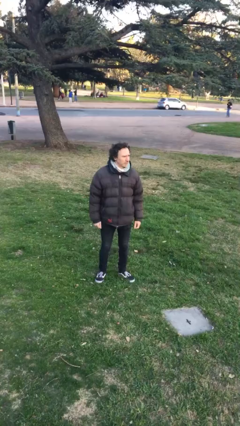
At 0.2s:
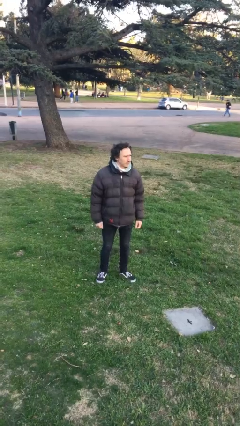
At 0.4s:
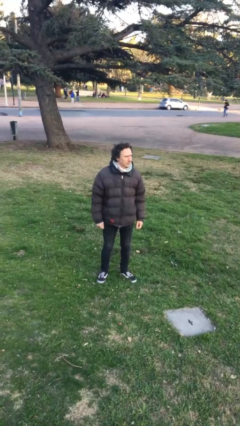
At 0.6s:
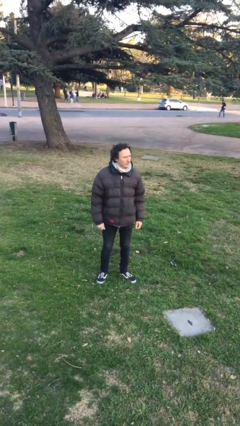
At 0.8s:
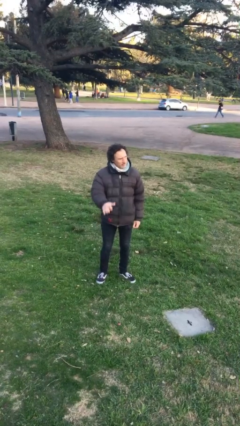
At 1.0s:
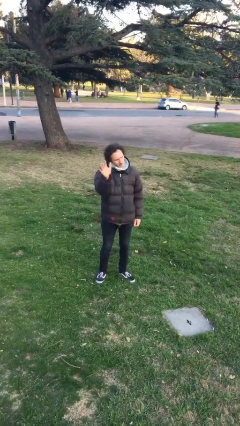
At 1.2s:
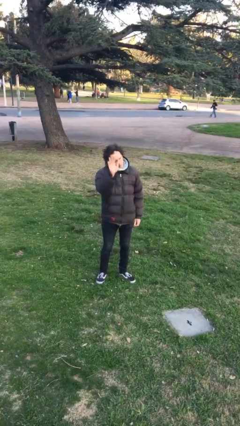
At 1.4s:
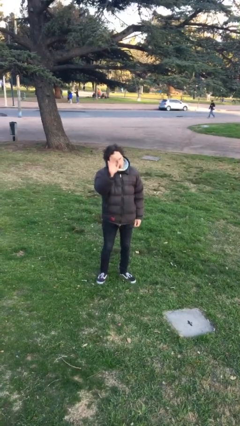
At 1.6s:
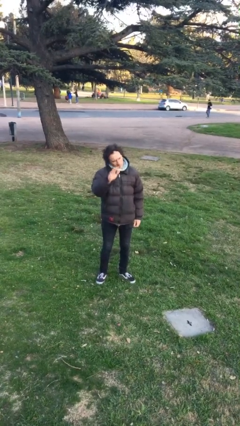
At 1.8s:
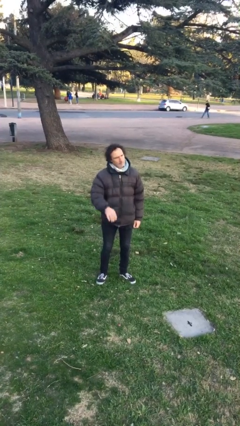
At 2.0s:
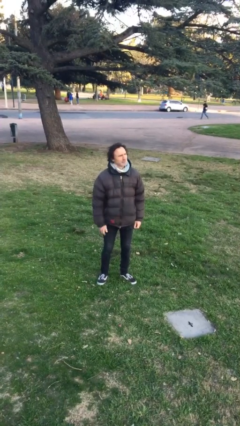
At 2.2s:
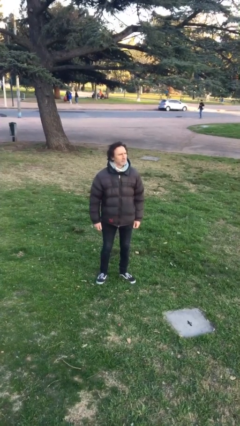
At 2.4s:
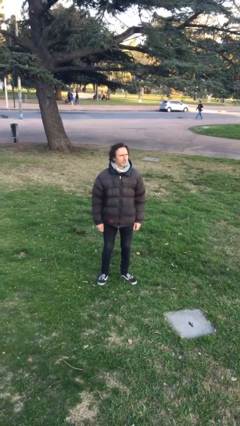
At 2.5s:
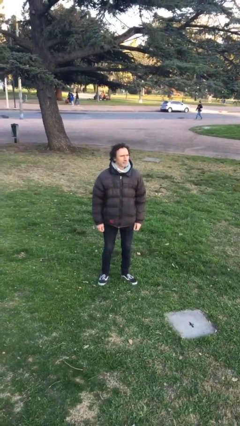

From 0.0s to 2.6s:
person waves at person

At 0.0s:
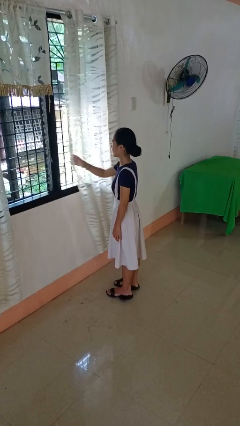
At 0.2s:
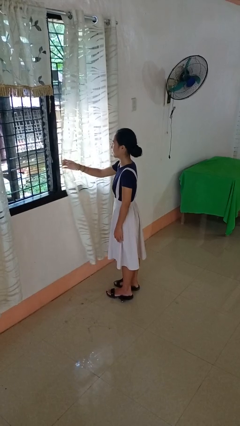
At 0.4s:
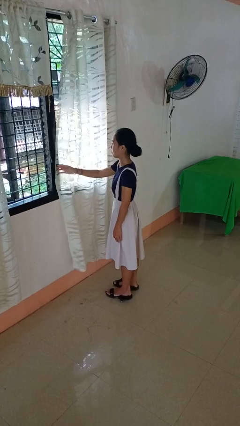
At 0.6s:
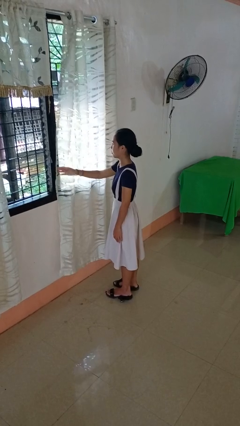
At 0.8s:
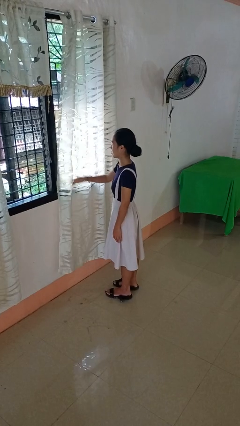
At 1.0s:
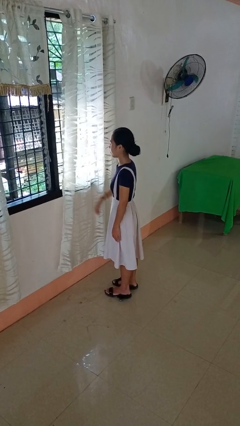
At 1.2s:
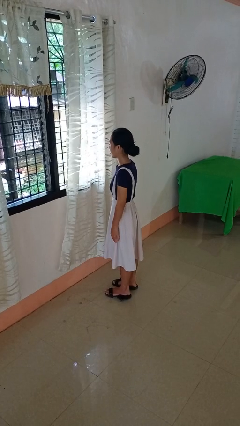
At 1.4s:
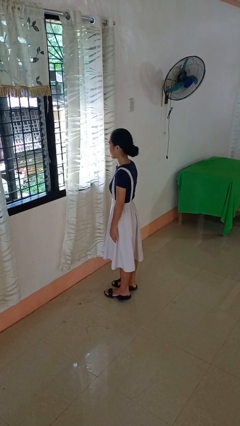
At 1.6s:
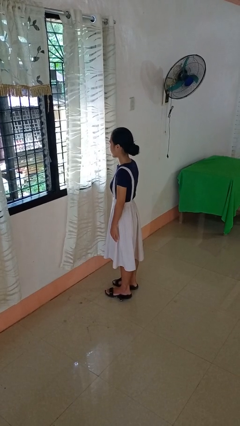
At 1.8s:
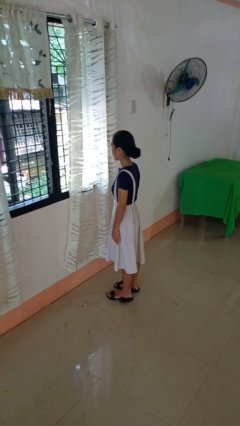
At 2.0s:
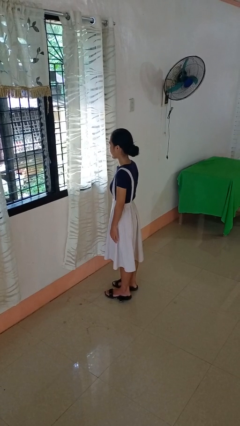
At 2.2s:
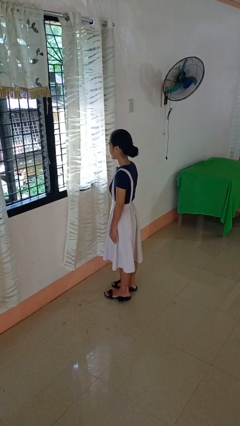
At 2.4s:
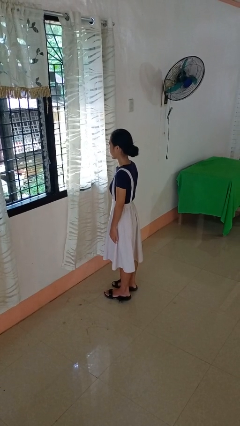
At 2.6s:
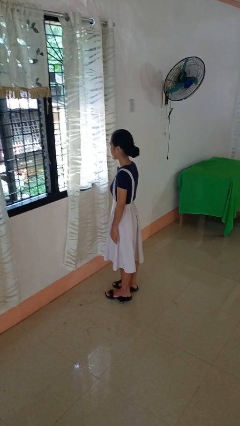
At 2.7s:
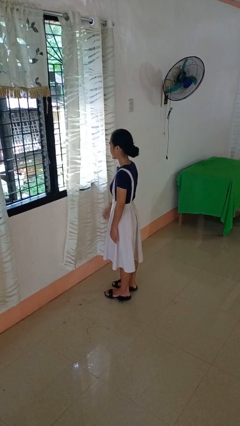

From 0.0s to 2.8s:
person closes curtains

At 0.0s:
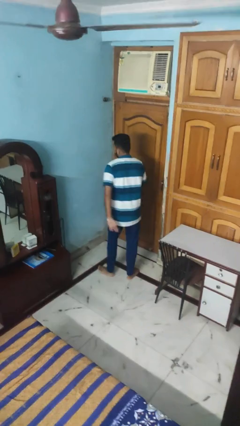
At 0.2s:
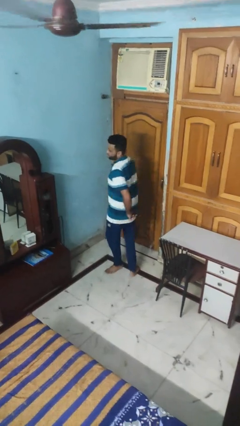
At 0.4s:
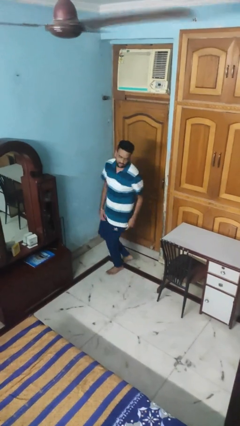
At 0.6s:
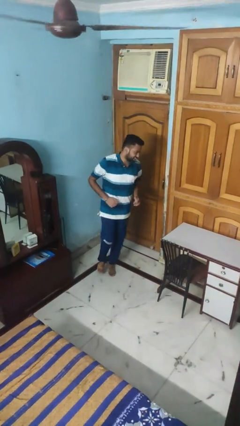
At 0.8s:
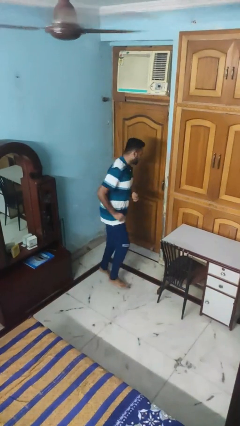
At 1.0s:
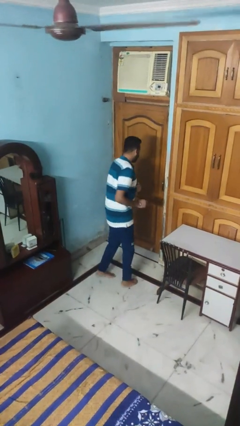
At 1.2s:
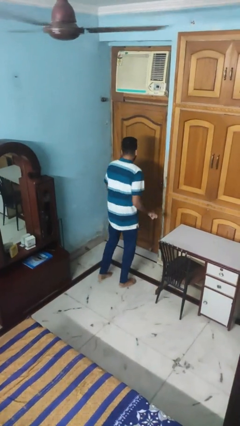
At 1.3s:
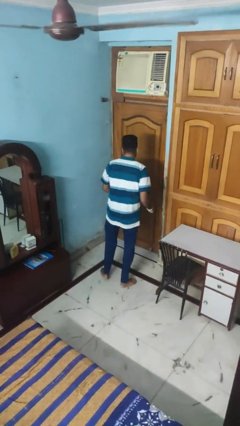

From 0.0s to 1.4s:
person twirls

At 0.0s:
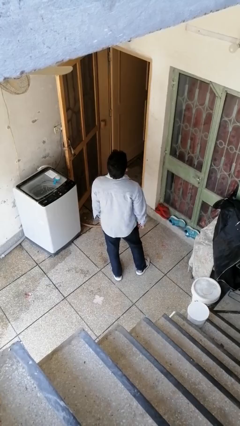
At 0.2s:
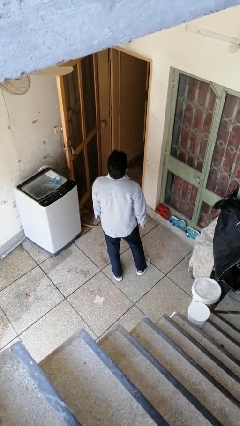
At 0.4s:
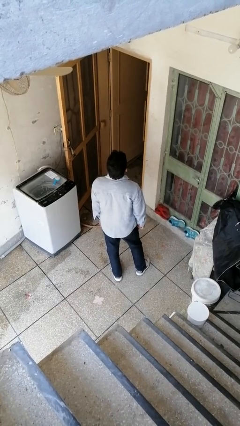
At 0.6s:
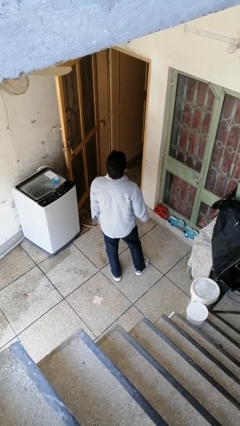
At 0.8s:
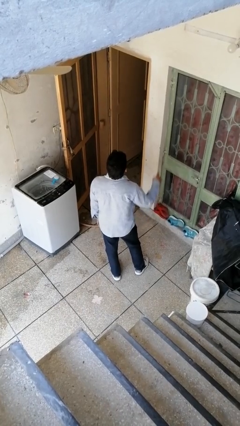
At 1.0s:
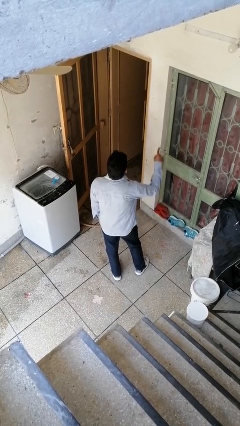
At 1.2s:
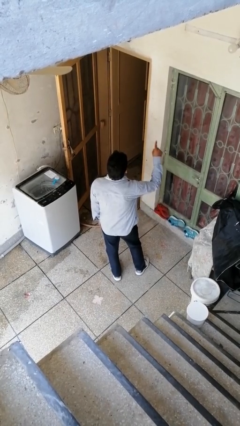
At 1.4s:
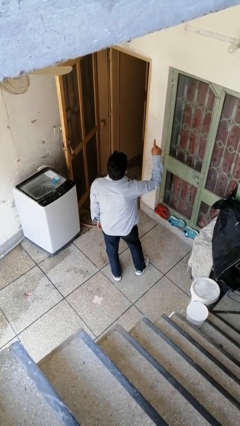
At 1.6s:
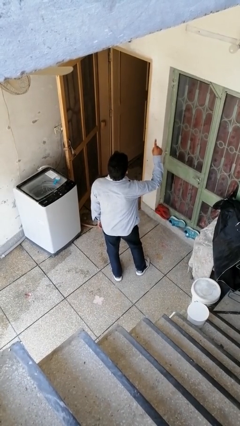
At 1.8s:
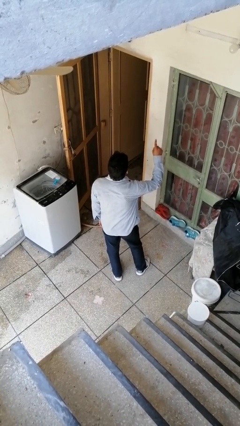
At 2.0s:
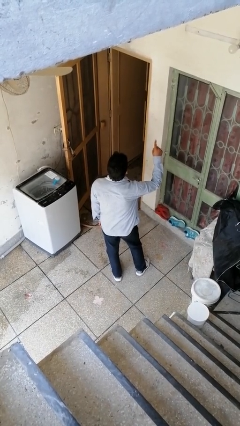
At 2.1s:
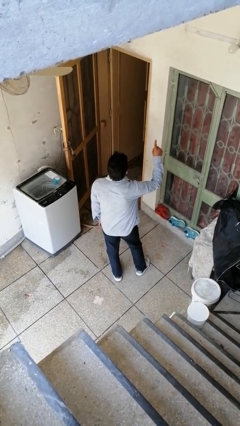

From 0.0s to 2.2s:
person gestures number one

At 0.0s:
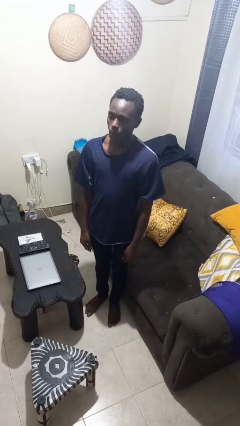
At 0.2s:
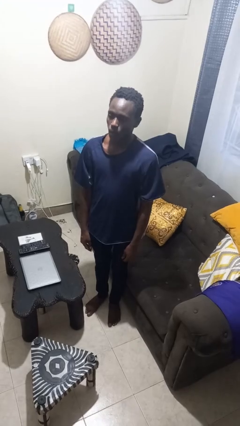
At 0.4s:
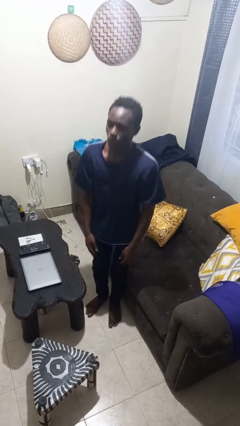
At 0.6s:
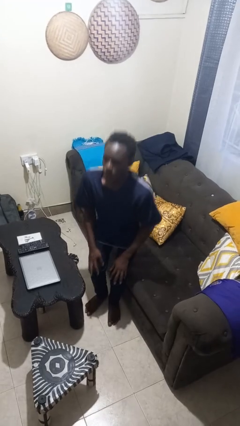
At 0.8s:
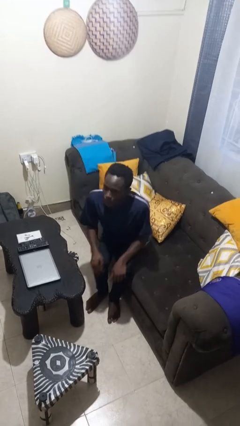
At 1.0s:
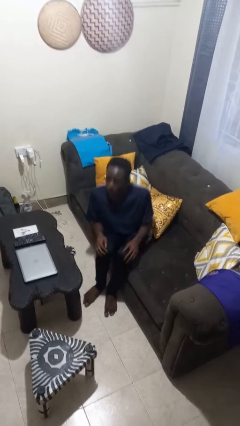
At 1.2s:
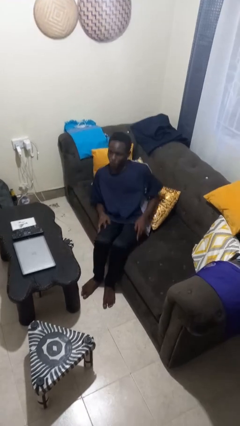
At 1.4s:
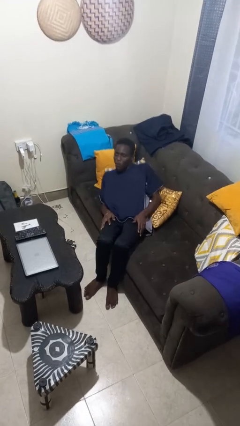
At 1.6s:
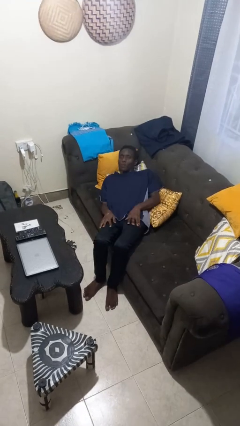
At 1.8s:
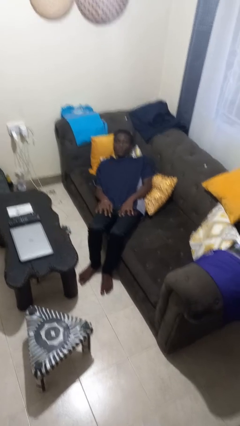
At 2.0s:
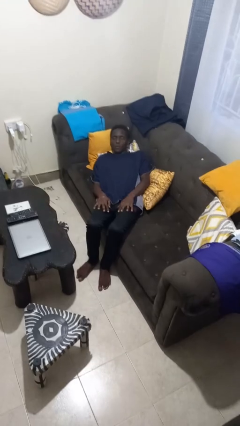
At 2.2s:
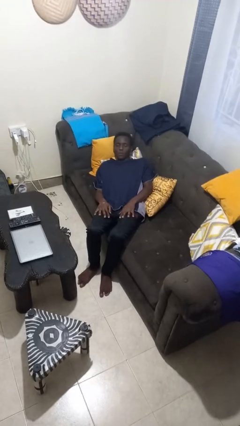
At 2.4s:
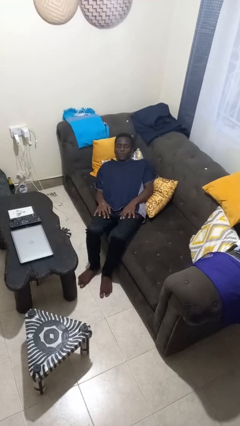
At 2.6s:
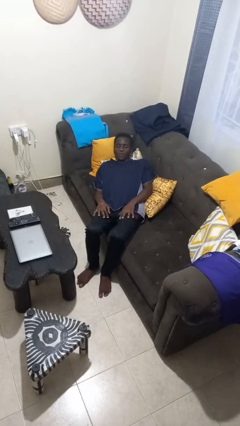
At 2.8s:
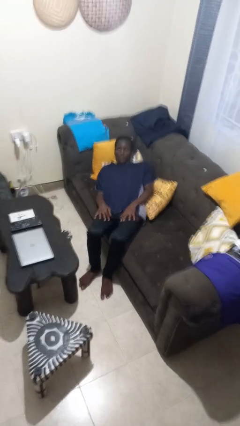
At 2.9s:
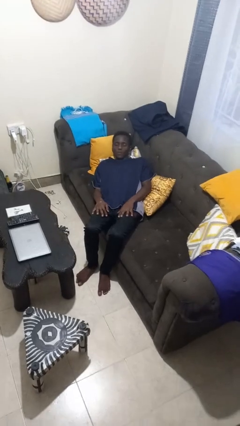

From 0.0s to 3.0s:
person lies down on couch

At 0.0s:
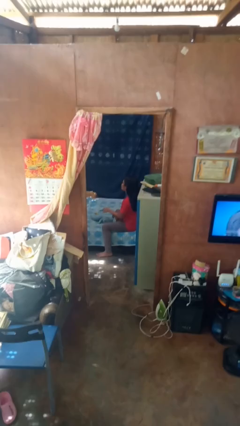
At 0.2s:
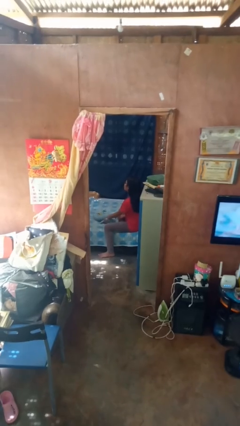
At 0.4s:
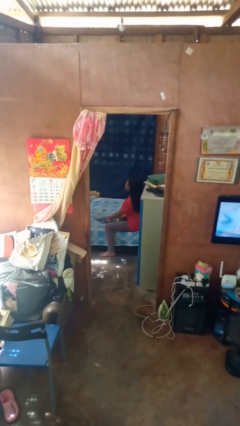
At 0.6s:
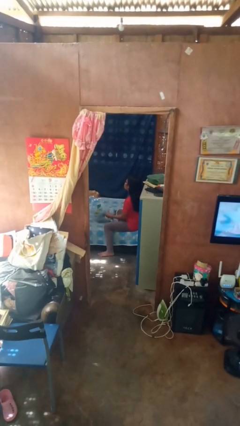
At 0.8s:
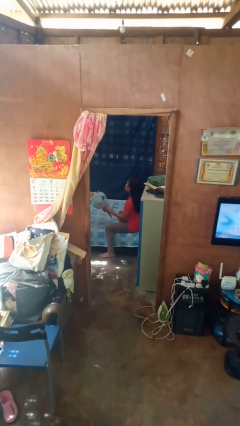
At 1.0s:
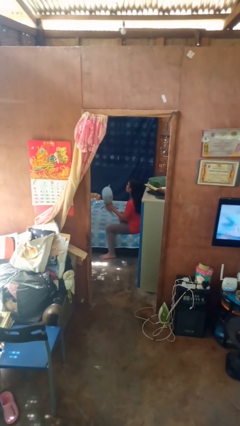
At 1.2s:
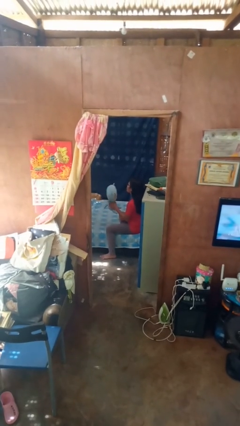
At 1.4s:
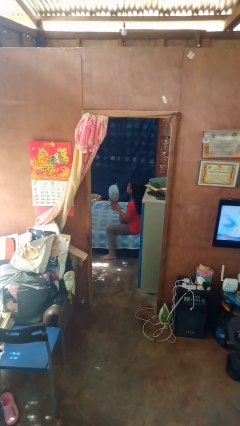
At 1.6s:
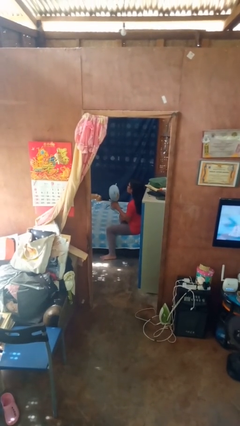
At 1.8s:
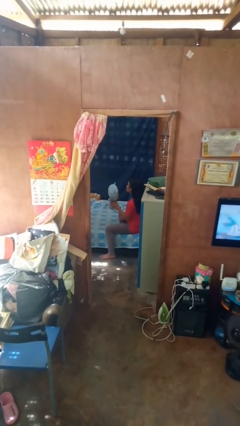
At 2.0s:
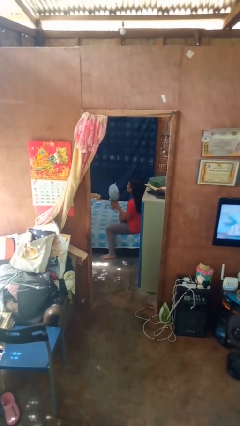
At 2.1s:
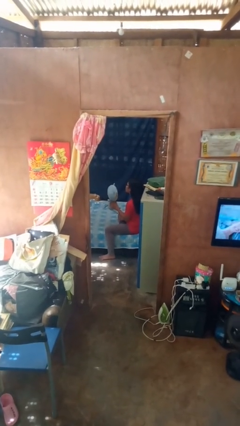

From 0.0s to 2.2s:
person picks up object from bed

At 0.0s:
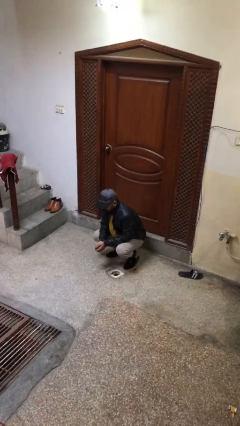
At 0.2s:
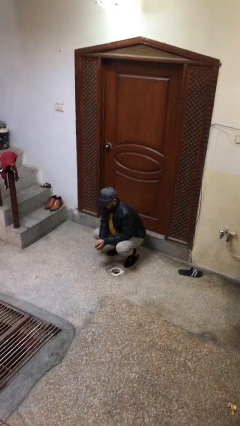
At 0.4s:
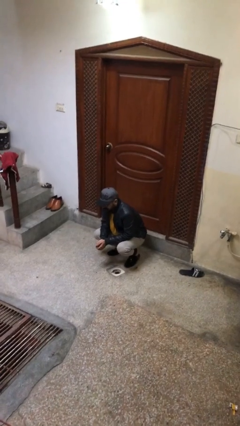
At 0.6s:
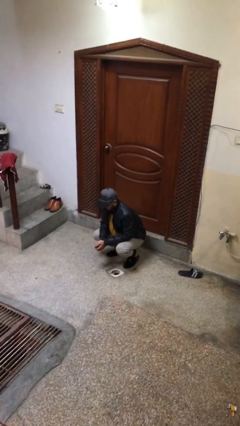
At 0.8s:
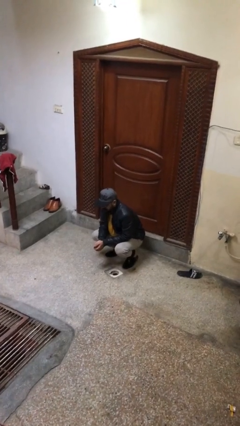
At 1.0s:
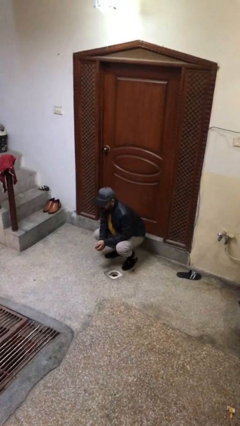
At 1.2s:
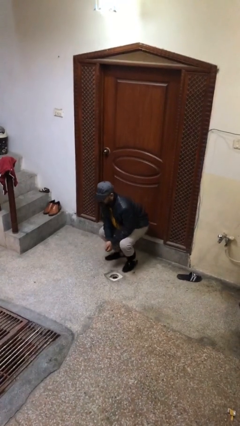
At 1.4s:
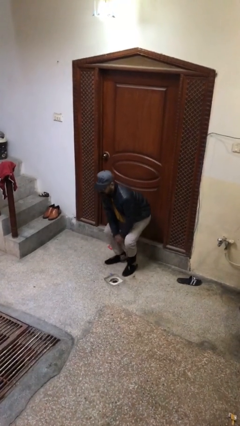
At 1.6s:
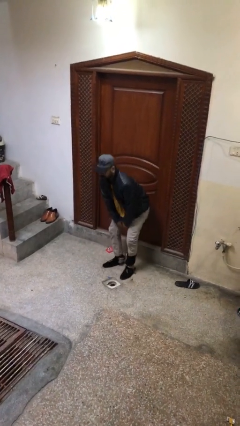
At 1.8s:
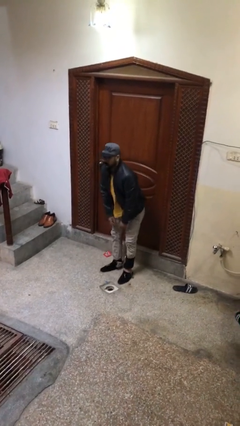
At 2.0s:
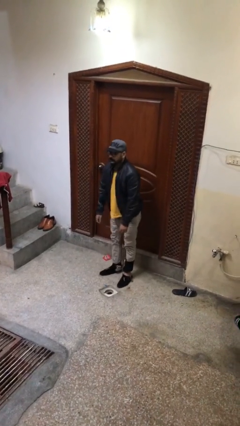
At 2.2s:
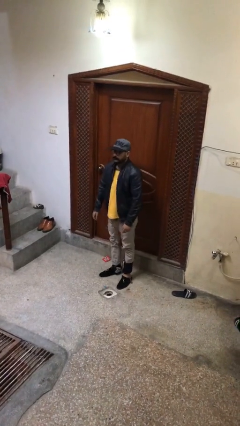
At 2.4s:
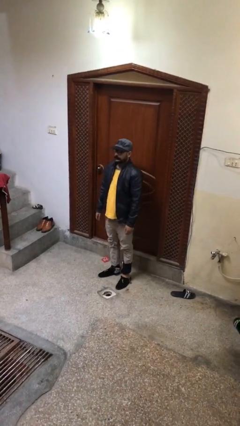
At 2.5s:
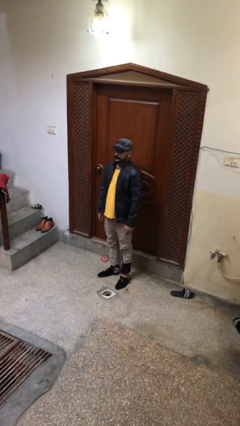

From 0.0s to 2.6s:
person stands up

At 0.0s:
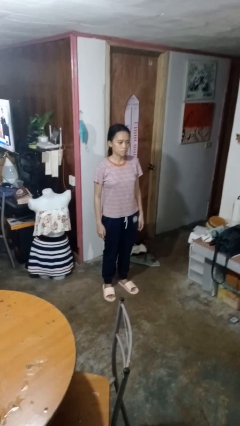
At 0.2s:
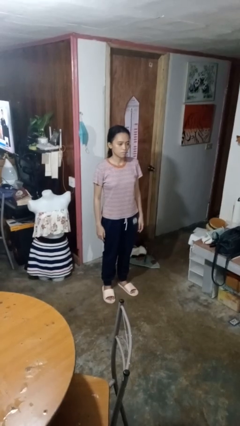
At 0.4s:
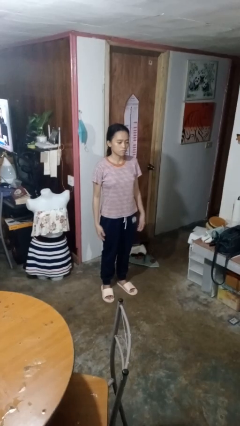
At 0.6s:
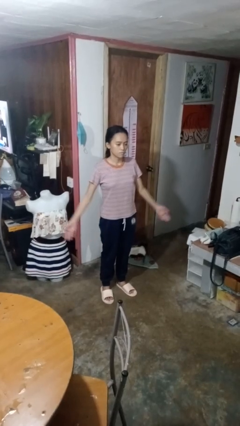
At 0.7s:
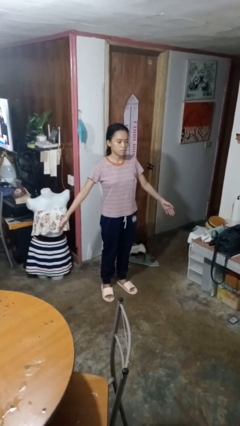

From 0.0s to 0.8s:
person slaps hands on thighs
